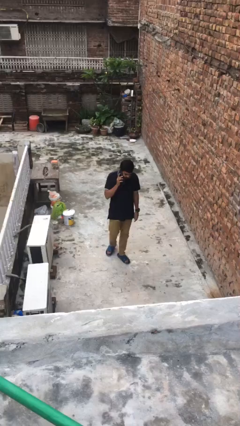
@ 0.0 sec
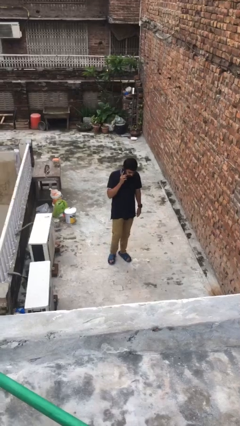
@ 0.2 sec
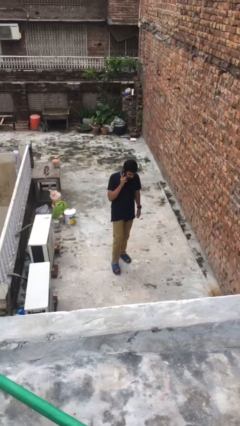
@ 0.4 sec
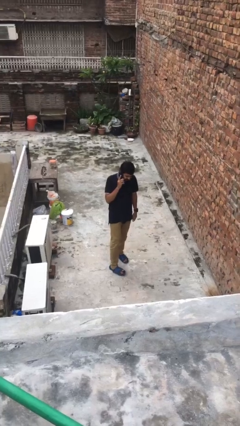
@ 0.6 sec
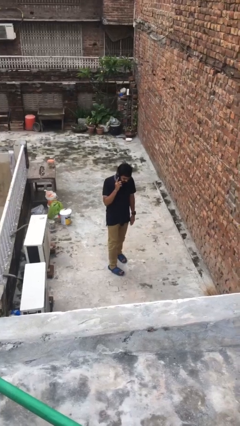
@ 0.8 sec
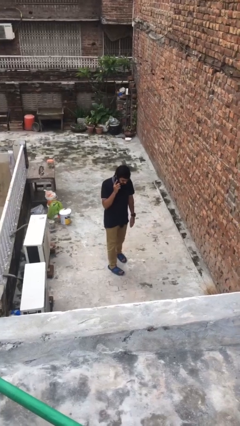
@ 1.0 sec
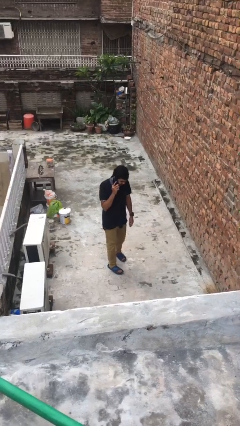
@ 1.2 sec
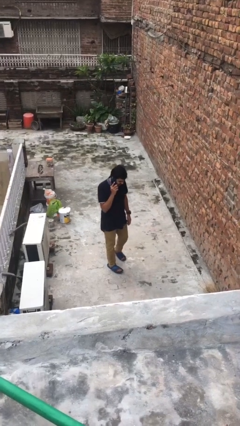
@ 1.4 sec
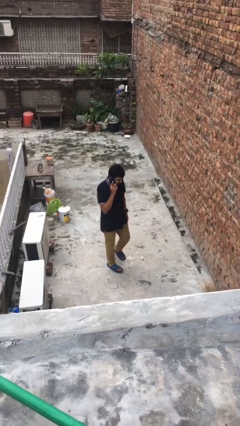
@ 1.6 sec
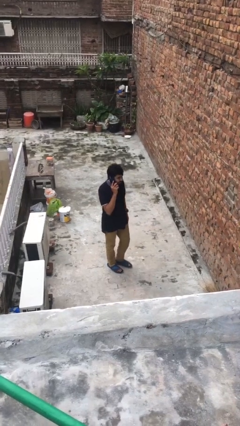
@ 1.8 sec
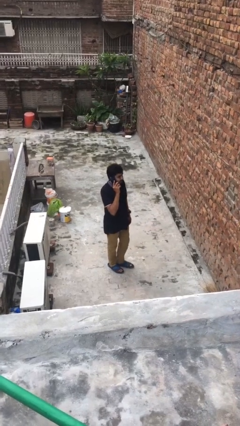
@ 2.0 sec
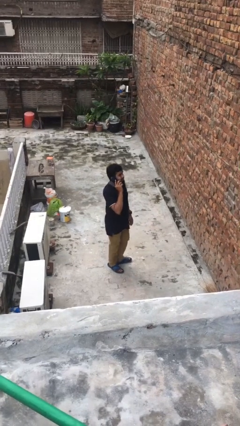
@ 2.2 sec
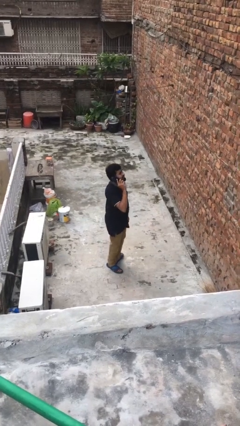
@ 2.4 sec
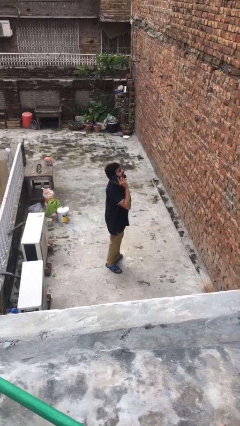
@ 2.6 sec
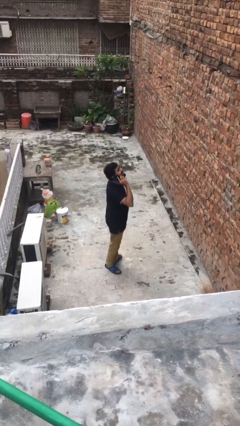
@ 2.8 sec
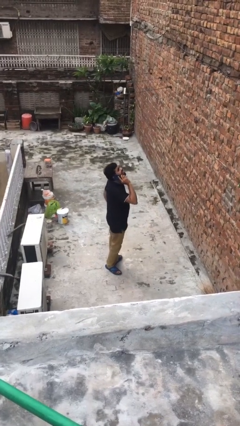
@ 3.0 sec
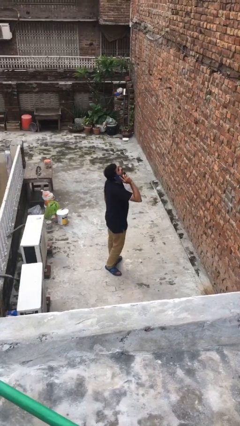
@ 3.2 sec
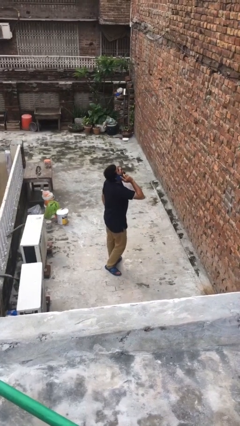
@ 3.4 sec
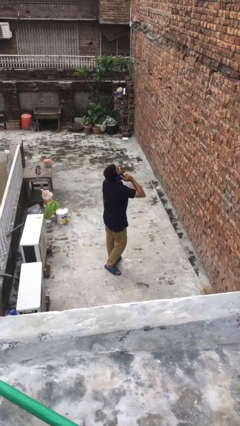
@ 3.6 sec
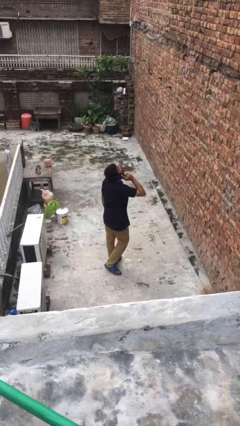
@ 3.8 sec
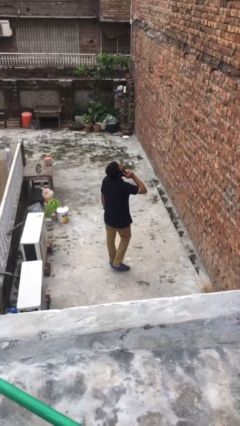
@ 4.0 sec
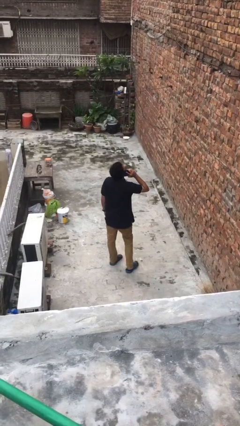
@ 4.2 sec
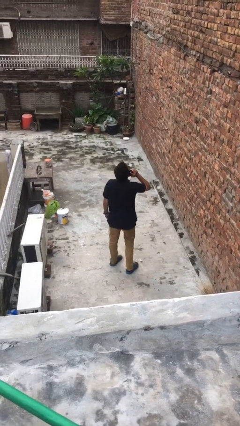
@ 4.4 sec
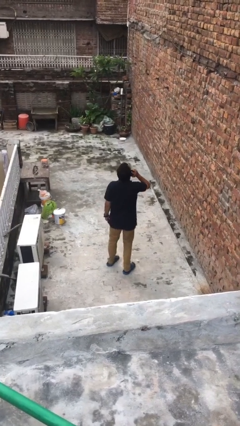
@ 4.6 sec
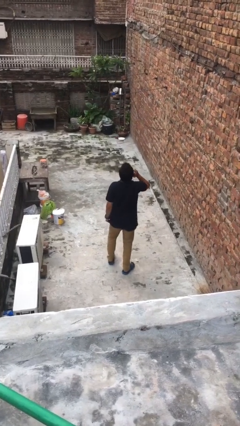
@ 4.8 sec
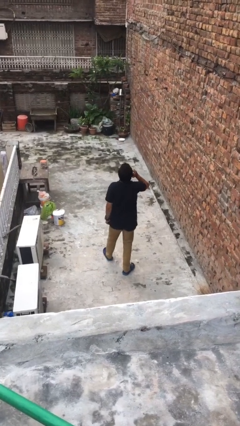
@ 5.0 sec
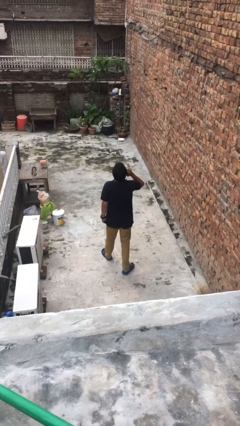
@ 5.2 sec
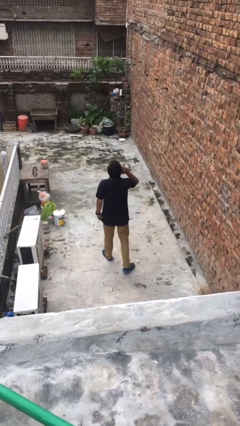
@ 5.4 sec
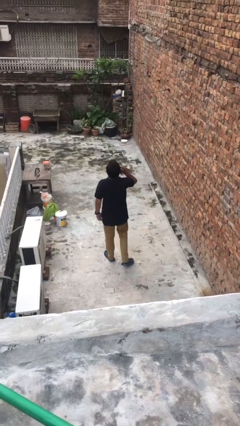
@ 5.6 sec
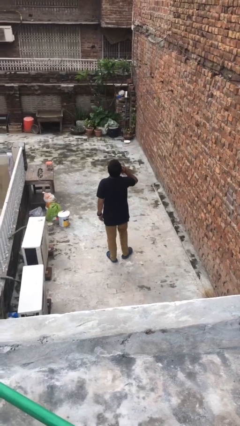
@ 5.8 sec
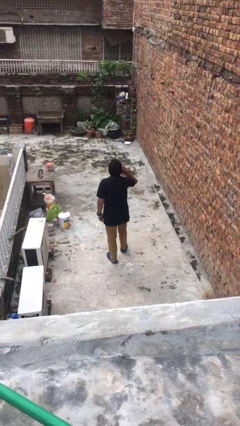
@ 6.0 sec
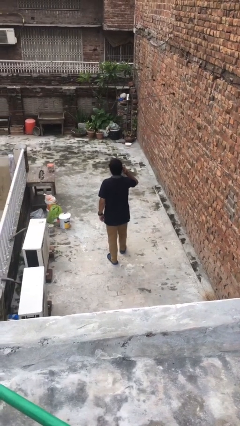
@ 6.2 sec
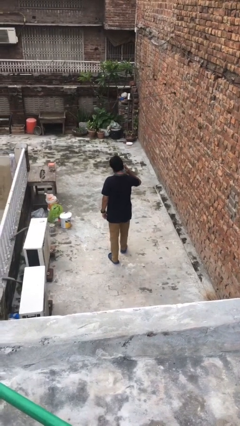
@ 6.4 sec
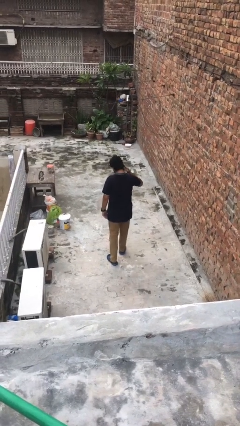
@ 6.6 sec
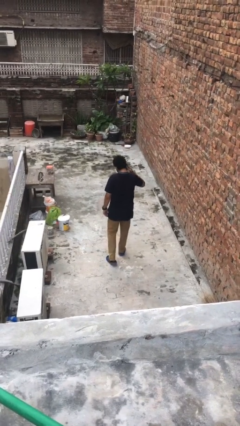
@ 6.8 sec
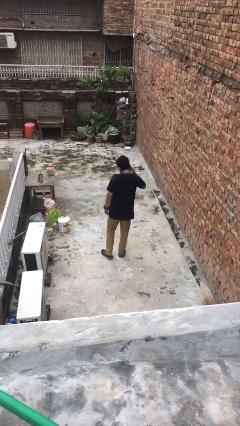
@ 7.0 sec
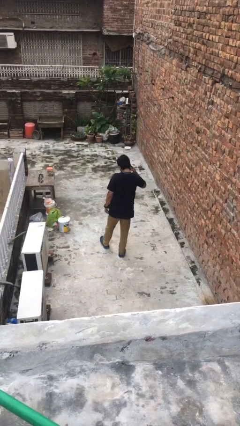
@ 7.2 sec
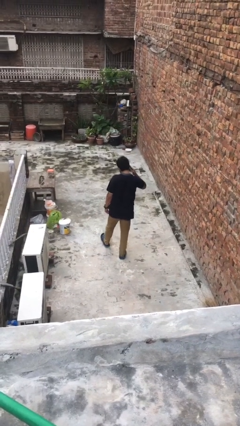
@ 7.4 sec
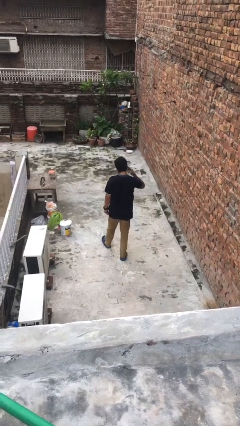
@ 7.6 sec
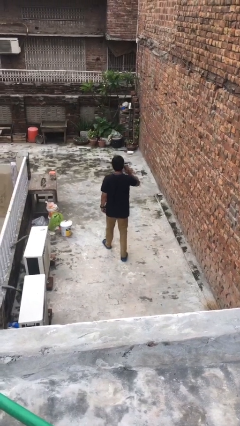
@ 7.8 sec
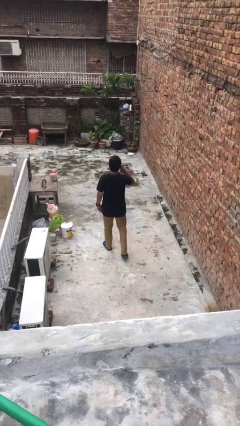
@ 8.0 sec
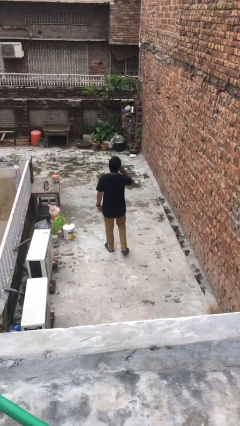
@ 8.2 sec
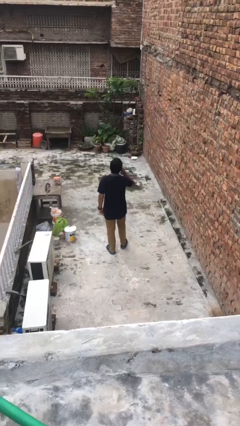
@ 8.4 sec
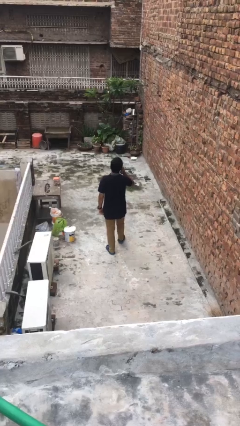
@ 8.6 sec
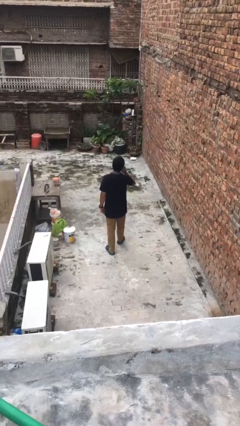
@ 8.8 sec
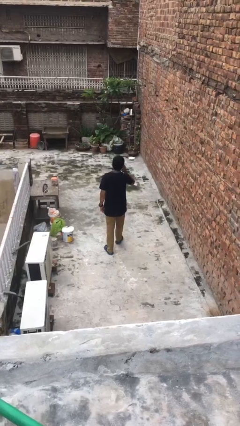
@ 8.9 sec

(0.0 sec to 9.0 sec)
person talks on phone

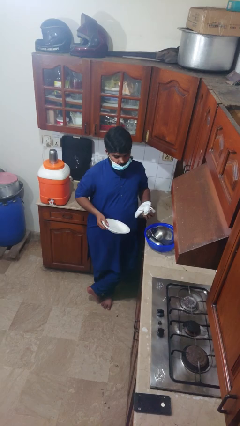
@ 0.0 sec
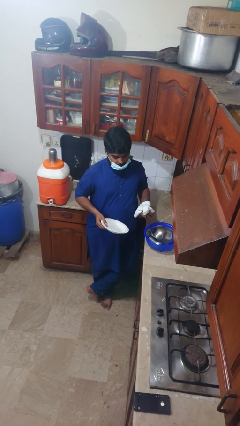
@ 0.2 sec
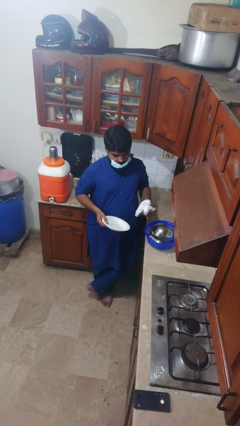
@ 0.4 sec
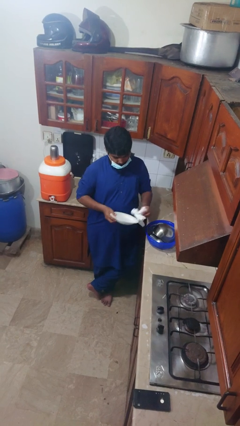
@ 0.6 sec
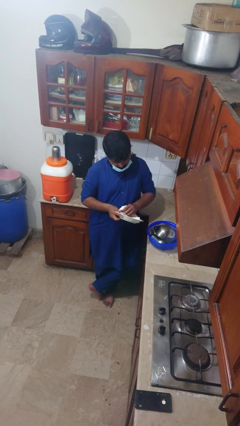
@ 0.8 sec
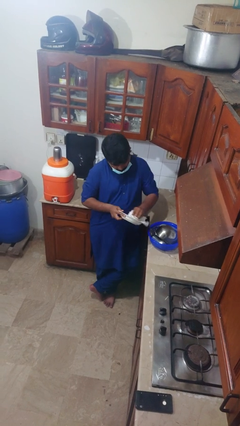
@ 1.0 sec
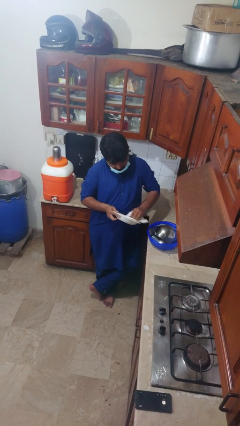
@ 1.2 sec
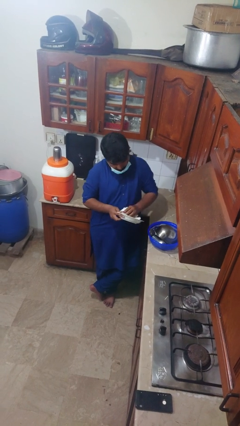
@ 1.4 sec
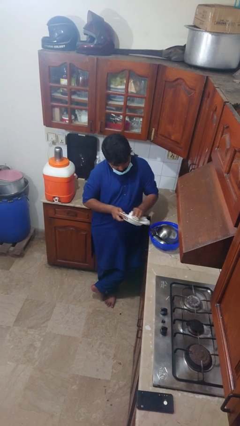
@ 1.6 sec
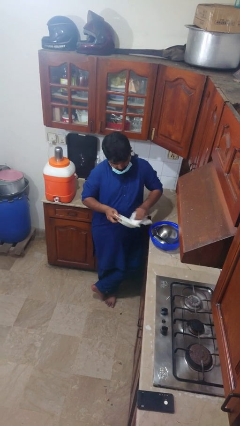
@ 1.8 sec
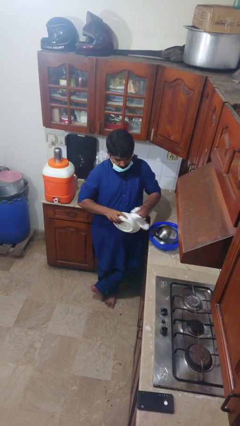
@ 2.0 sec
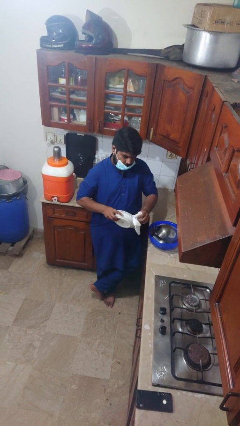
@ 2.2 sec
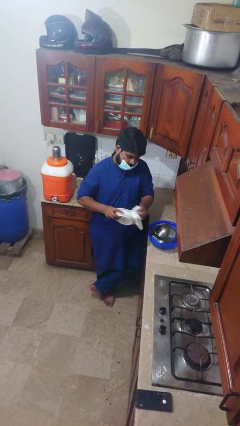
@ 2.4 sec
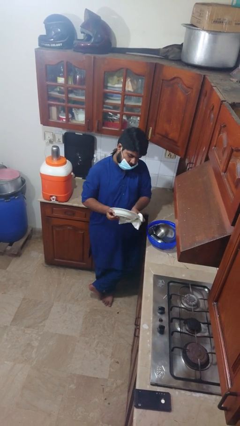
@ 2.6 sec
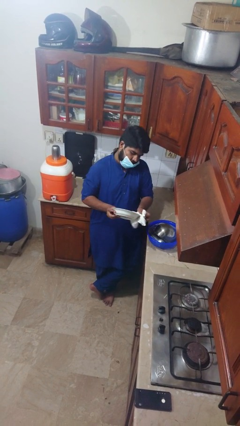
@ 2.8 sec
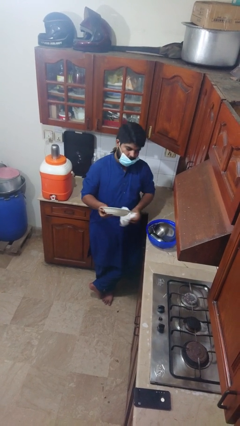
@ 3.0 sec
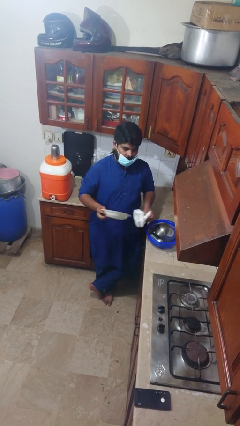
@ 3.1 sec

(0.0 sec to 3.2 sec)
person dries dish

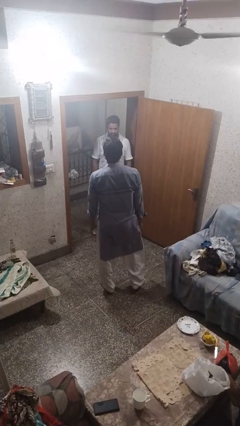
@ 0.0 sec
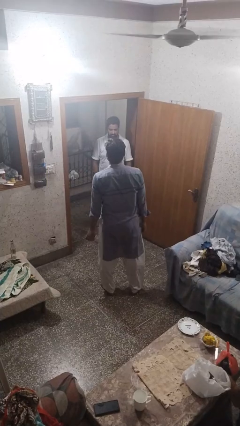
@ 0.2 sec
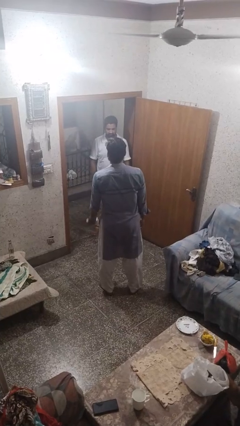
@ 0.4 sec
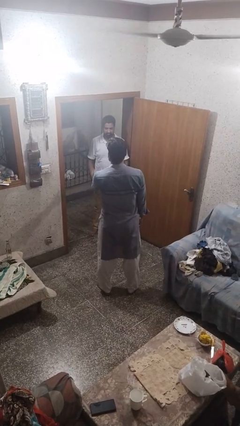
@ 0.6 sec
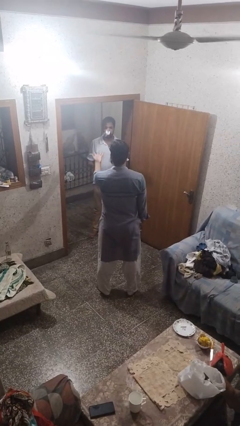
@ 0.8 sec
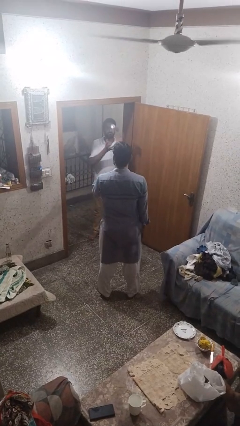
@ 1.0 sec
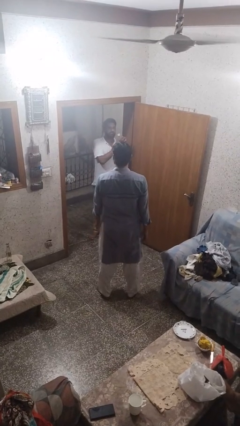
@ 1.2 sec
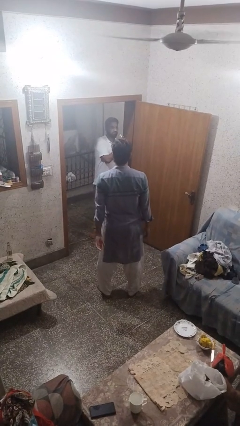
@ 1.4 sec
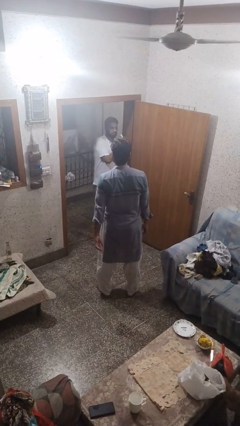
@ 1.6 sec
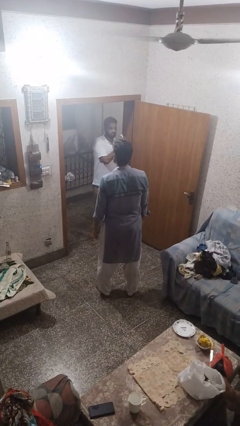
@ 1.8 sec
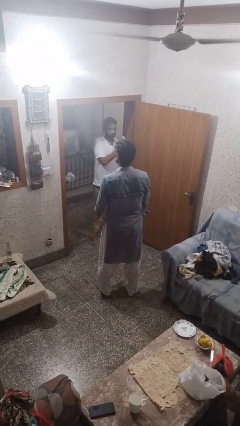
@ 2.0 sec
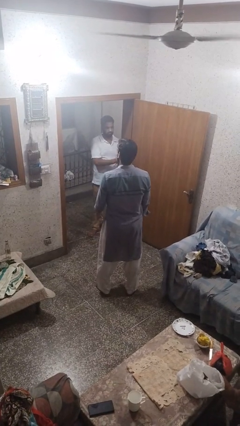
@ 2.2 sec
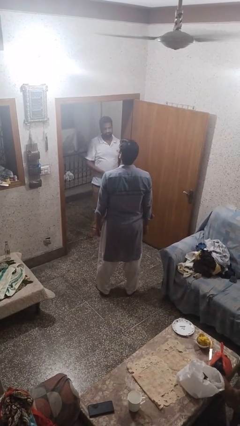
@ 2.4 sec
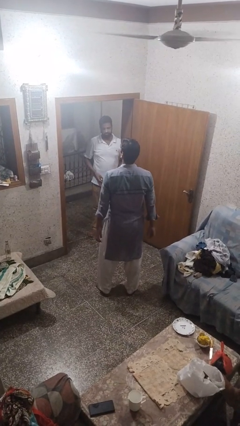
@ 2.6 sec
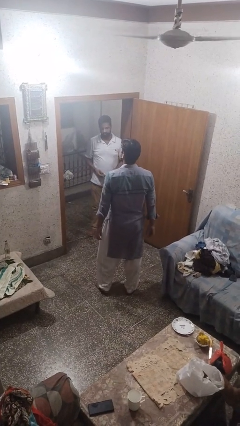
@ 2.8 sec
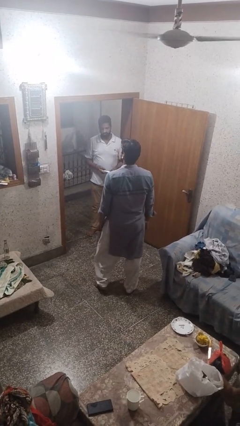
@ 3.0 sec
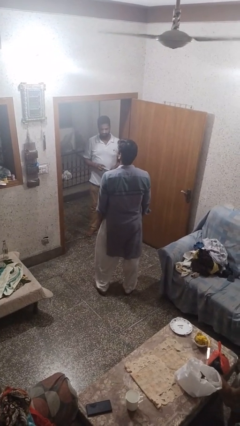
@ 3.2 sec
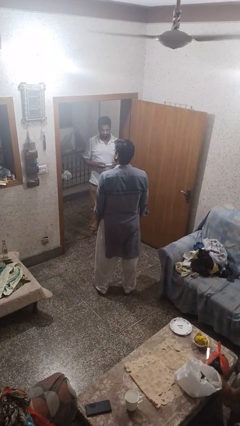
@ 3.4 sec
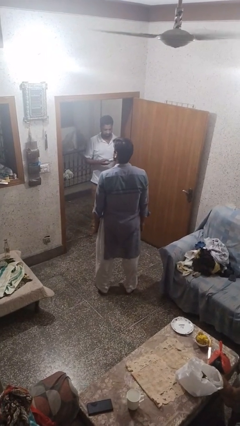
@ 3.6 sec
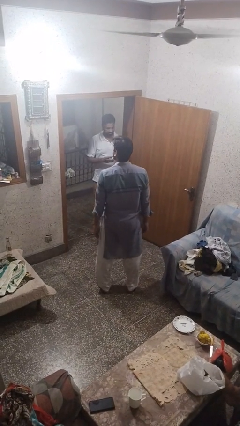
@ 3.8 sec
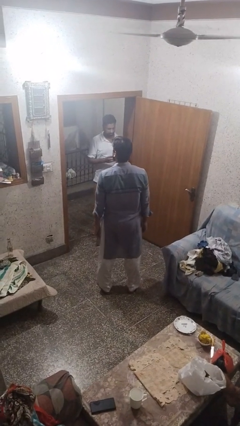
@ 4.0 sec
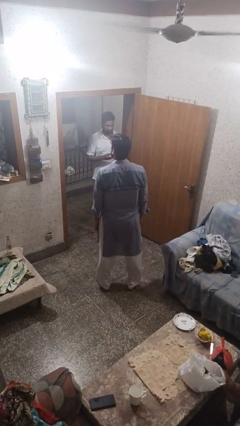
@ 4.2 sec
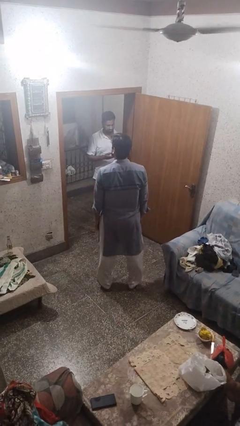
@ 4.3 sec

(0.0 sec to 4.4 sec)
person throws object to person

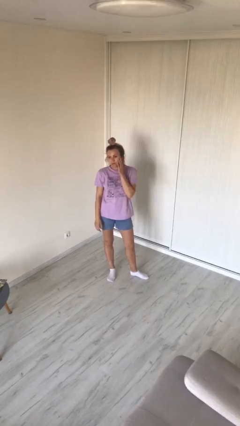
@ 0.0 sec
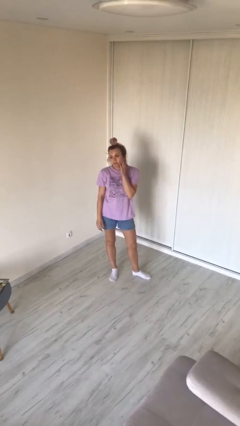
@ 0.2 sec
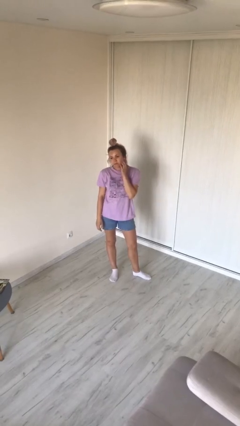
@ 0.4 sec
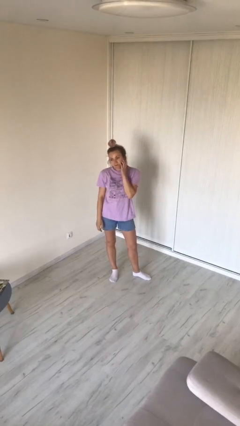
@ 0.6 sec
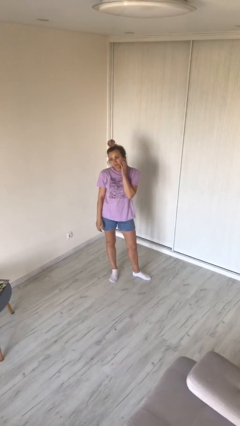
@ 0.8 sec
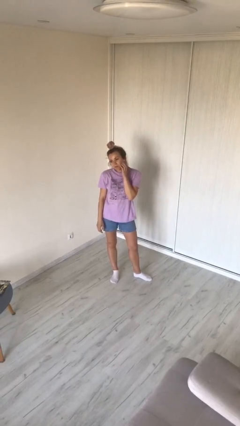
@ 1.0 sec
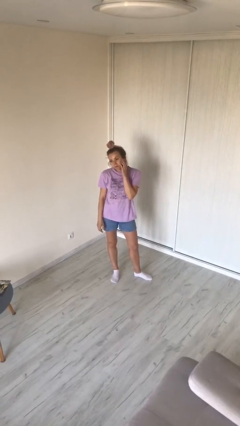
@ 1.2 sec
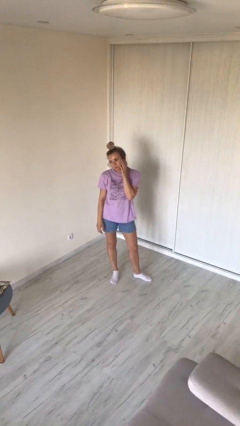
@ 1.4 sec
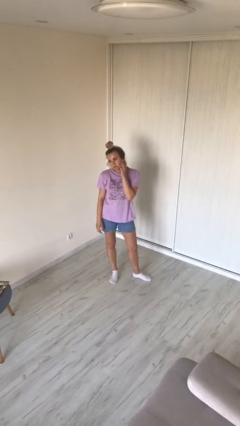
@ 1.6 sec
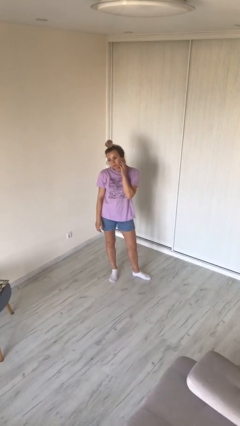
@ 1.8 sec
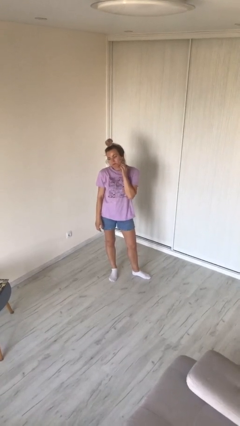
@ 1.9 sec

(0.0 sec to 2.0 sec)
person scratches face
